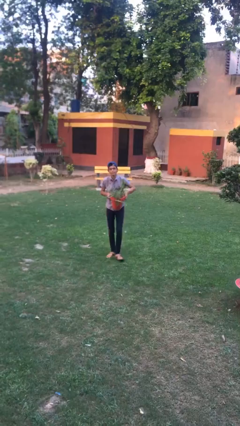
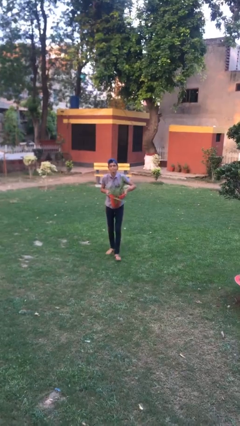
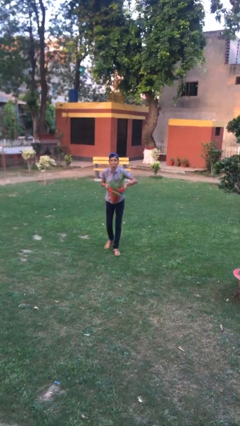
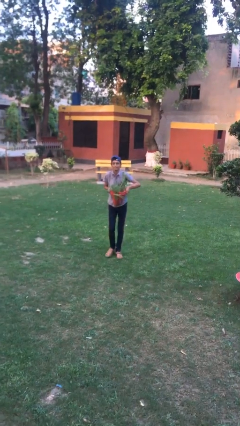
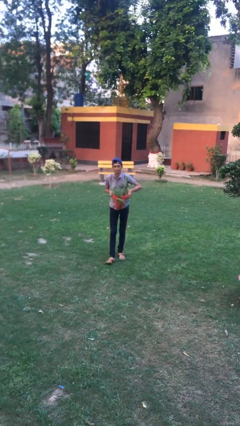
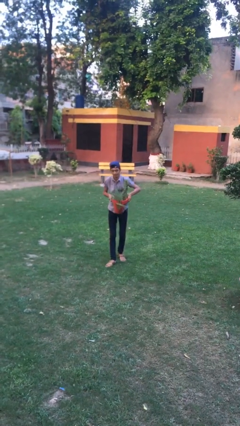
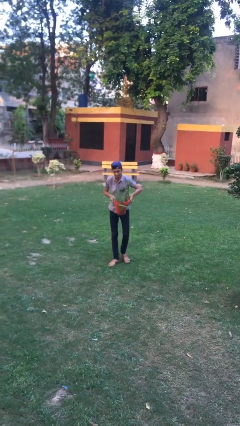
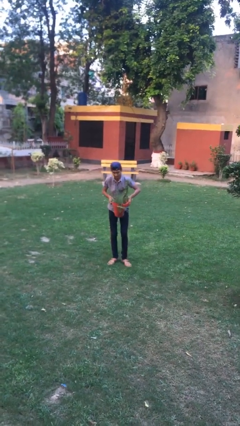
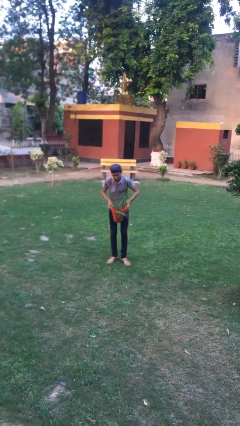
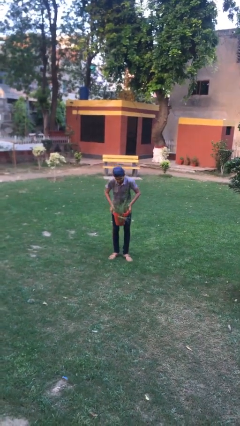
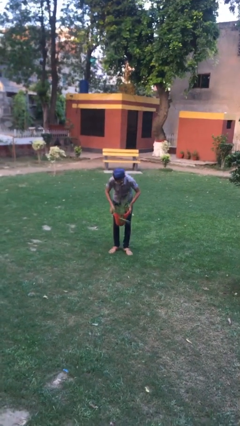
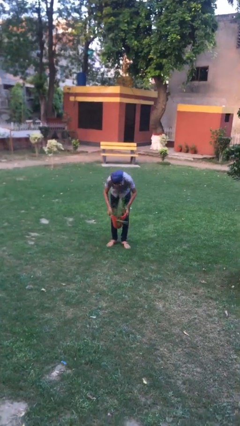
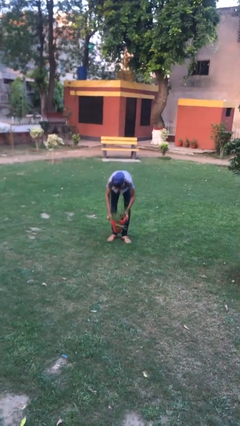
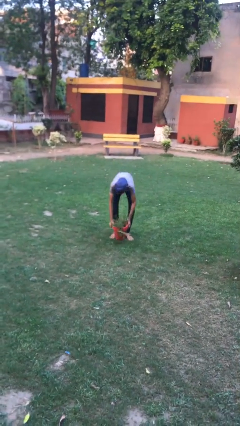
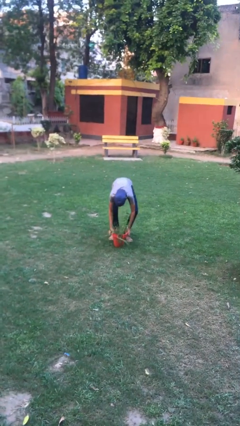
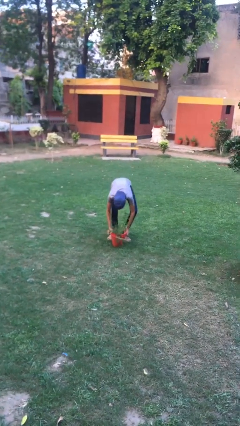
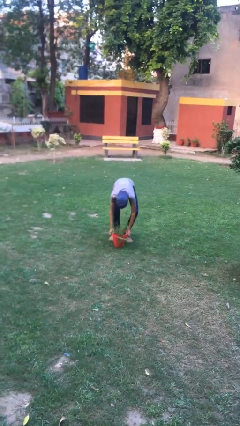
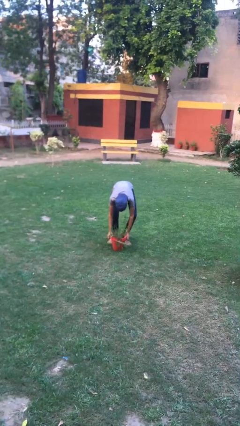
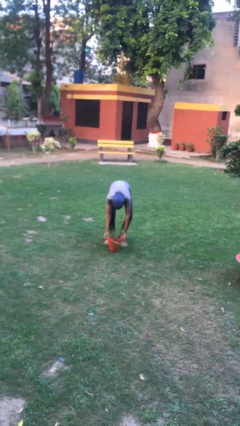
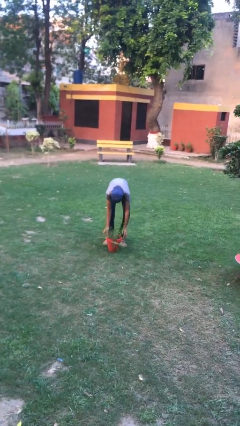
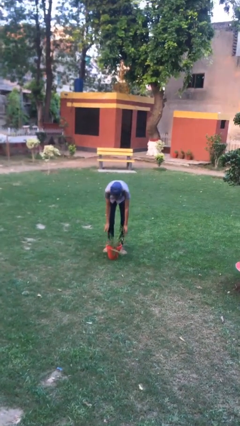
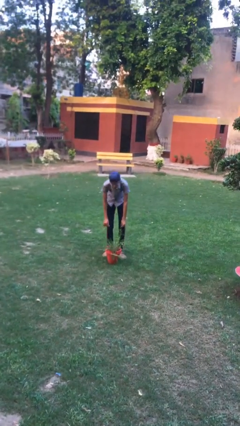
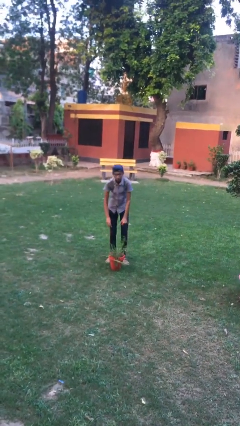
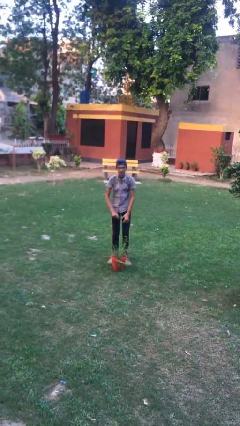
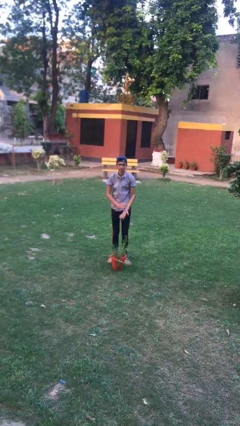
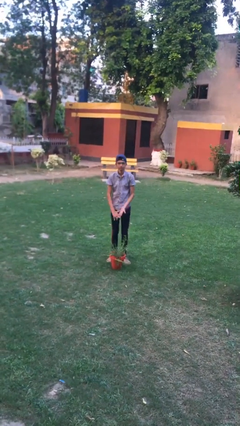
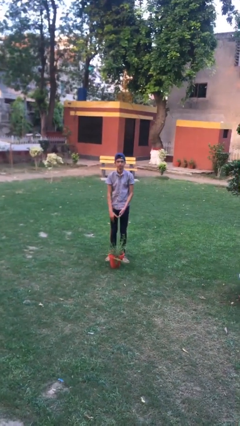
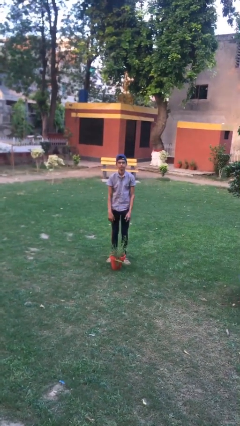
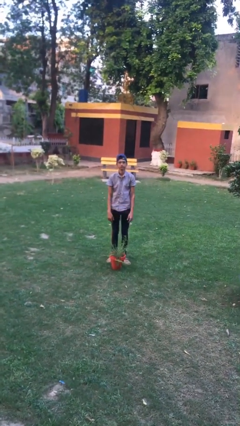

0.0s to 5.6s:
person puts down object on floor

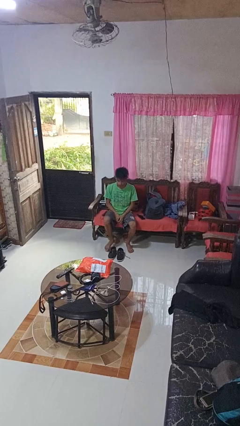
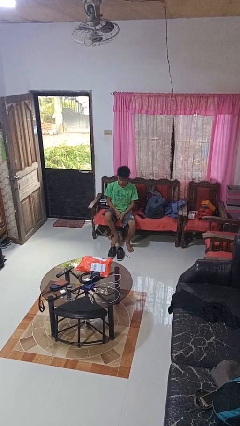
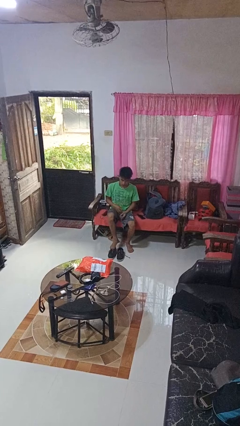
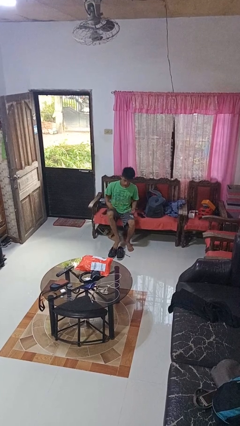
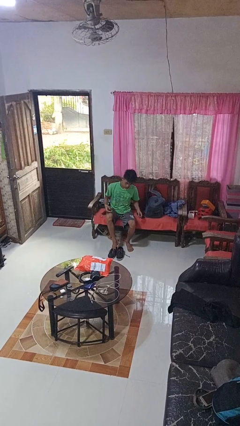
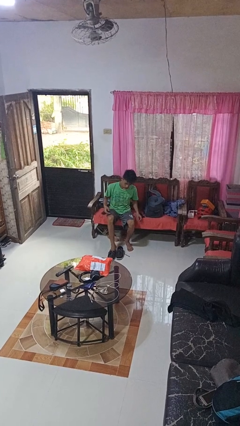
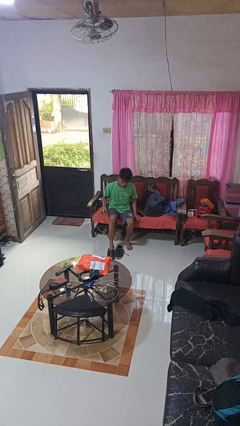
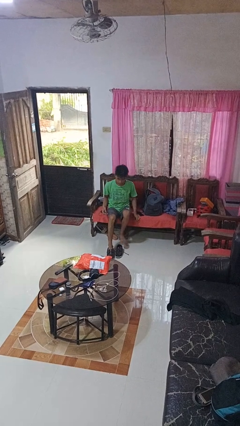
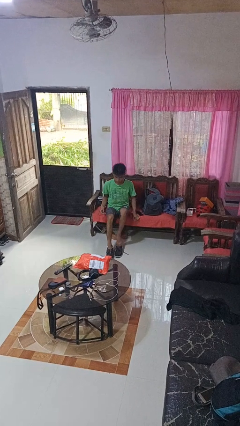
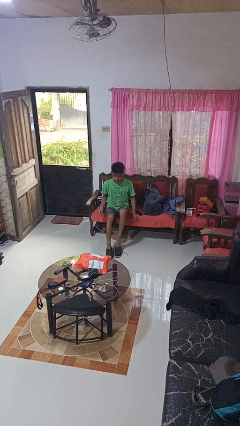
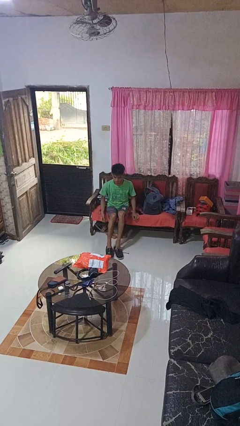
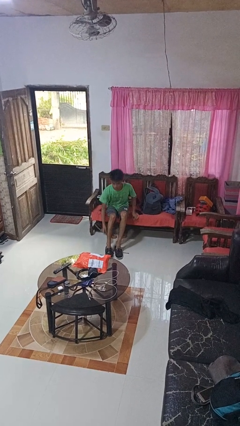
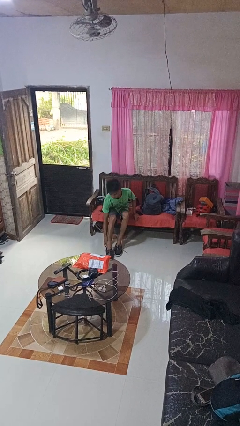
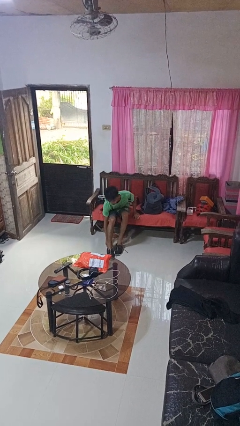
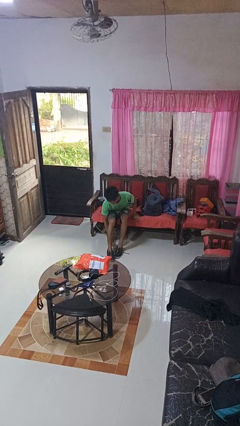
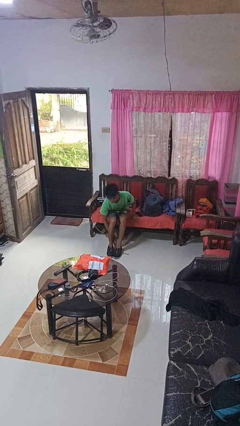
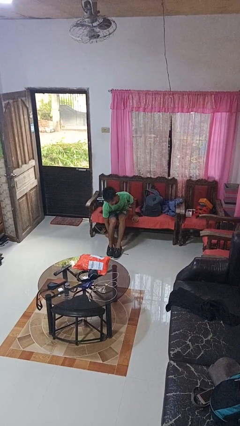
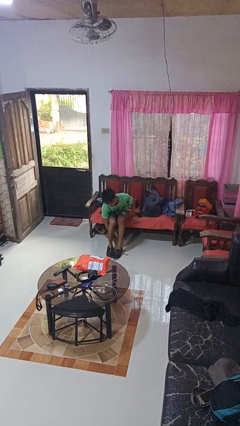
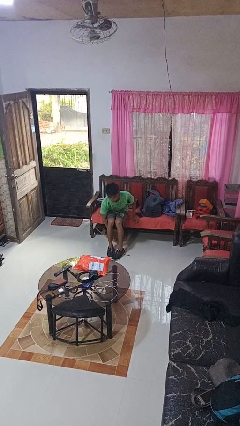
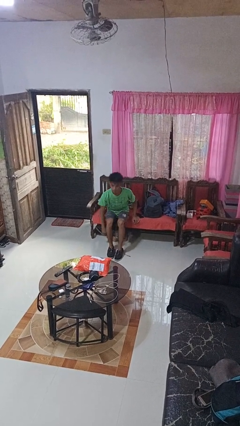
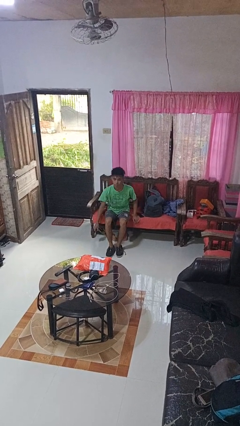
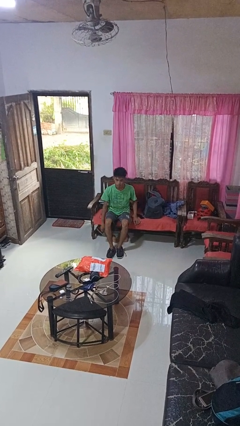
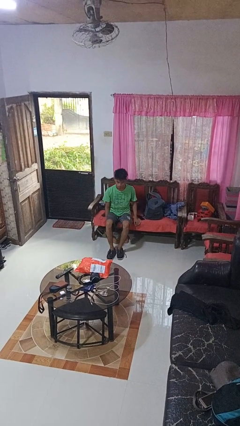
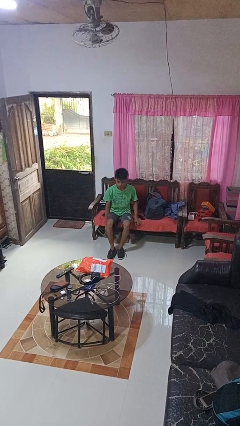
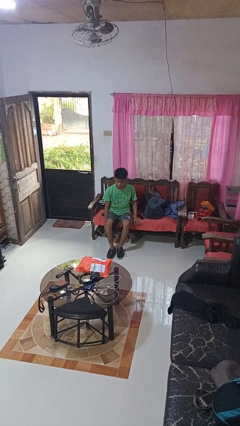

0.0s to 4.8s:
person puts on shoes

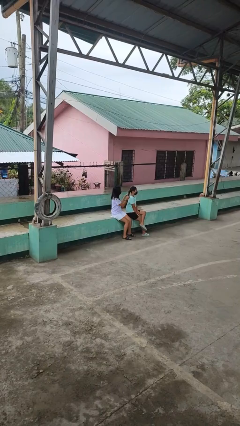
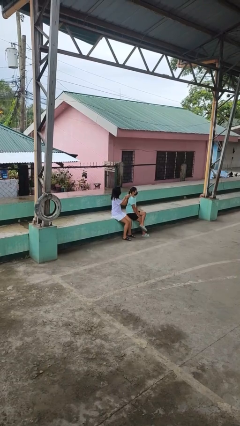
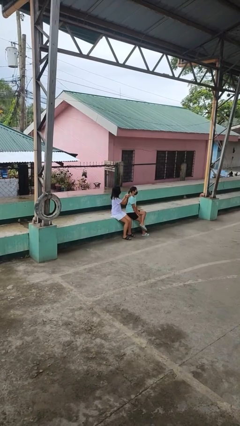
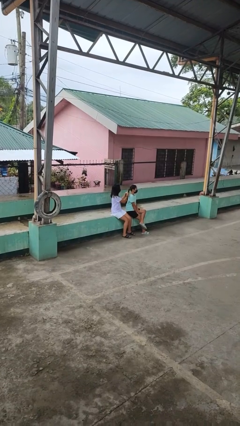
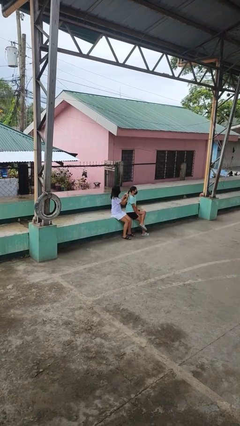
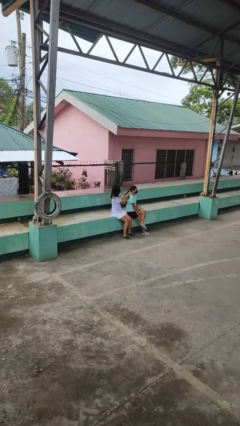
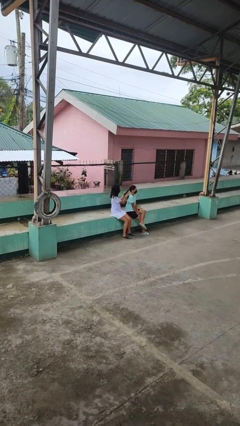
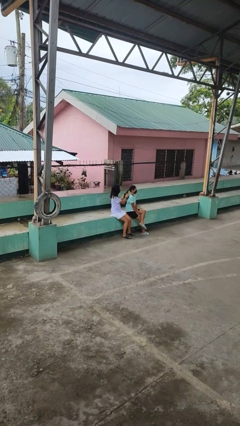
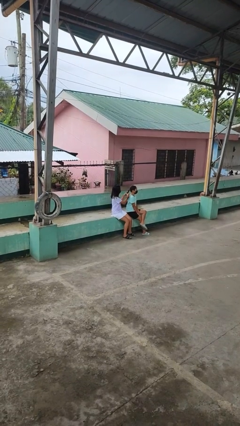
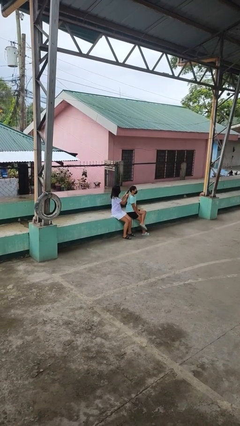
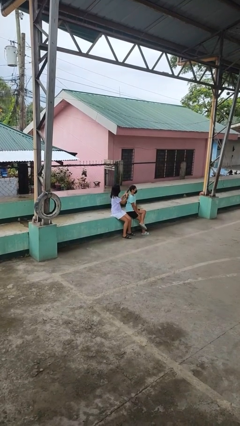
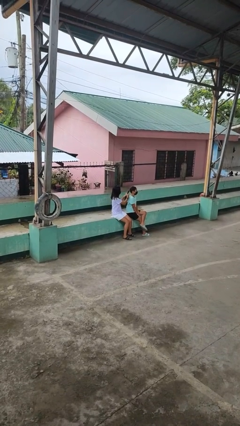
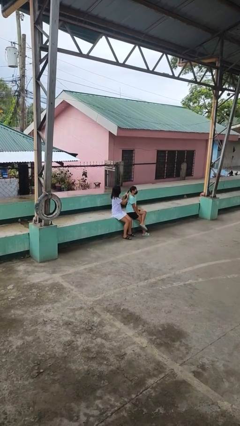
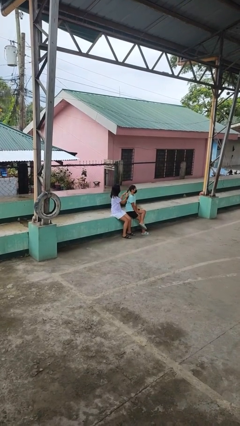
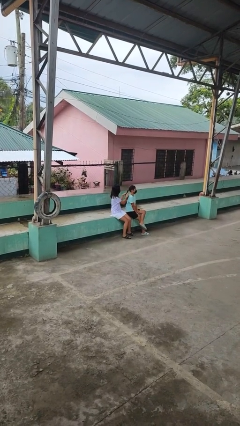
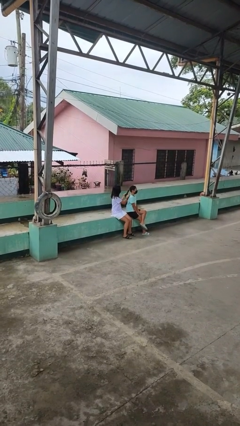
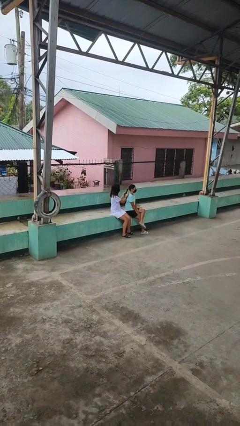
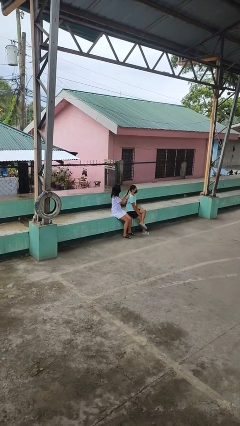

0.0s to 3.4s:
person braids hair of person

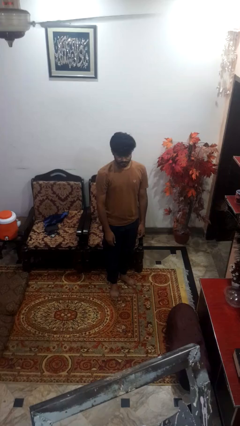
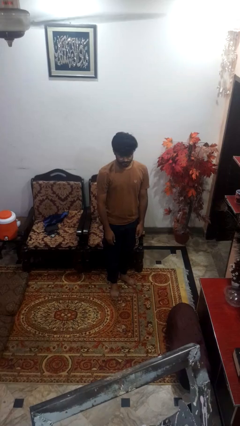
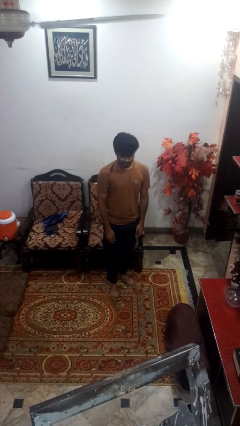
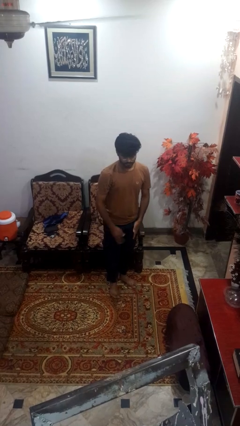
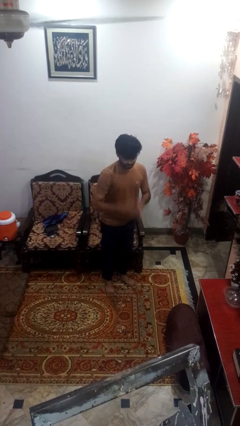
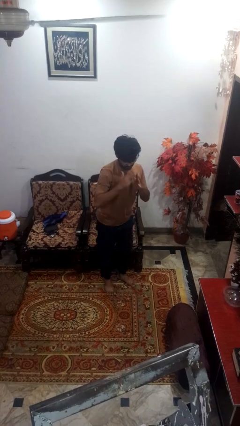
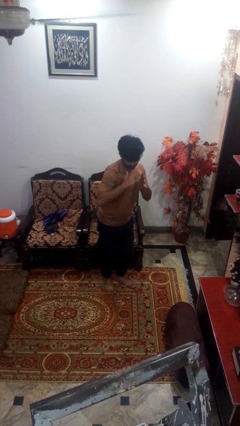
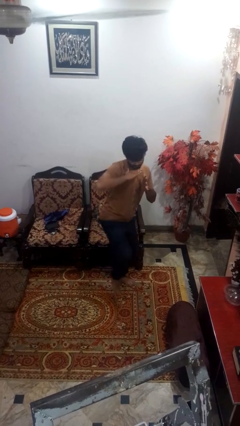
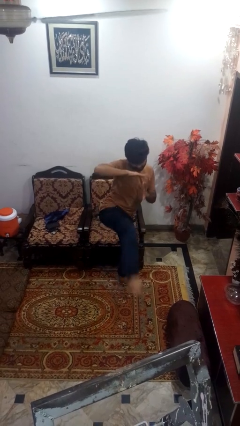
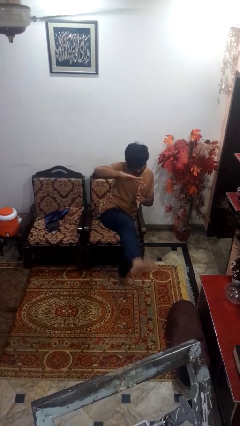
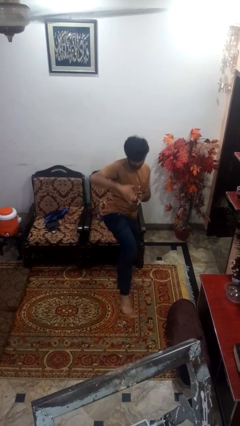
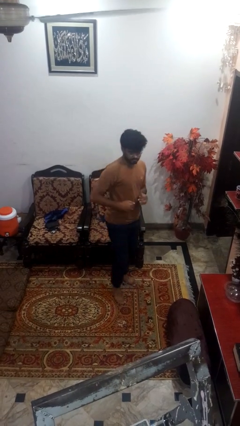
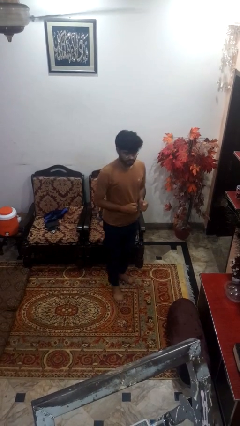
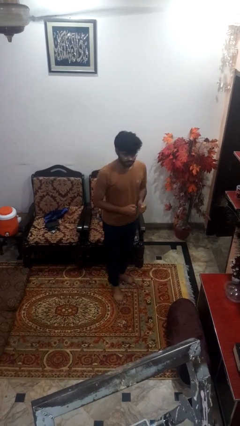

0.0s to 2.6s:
person karate kicks

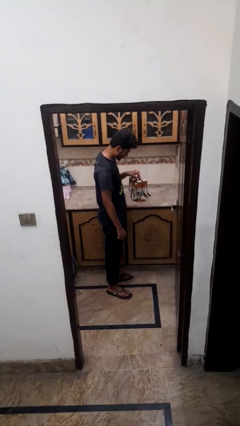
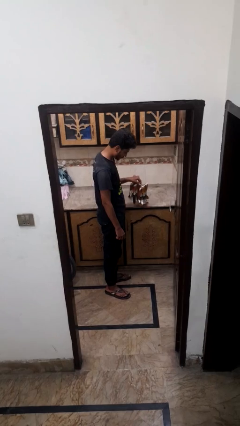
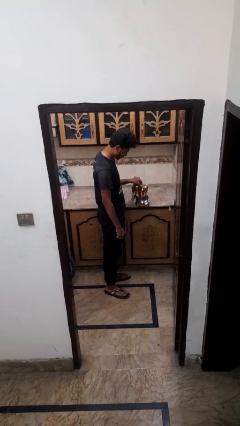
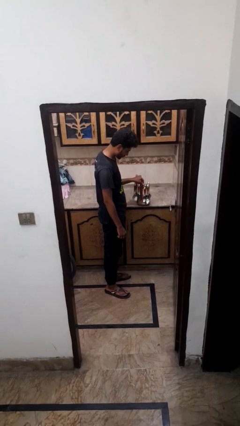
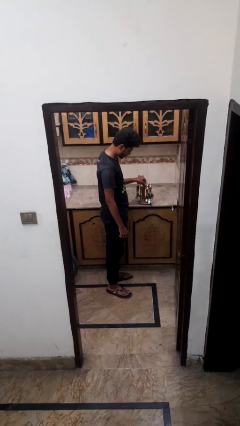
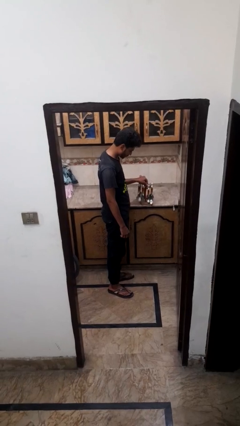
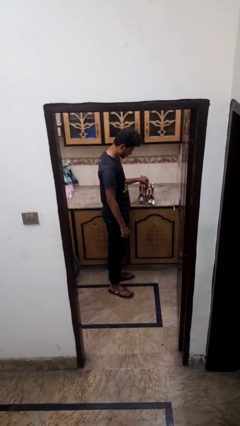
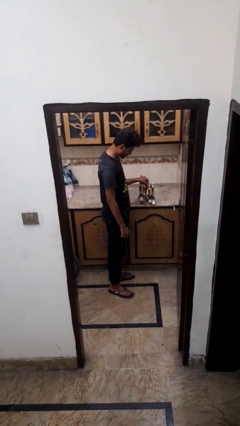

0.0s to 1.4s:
person puts down object on countertop
